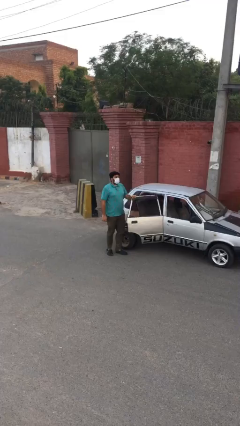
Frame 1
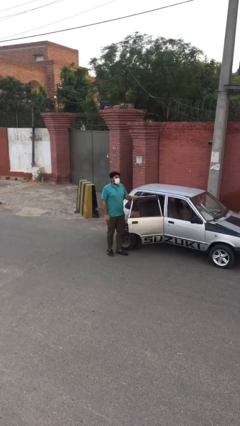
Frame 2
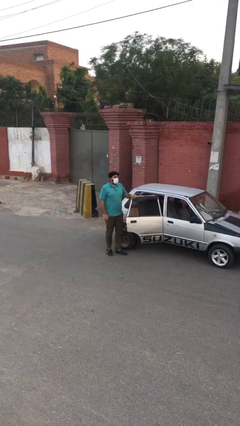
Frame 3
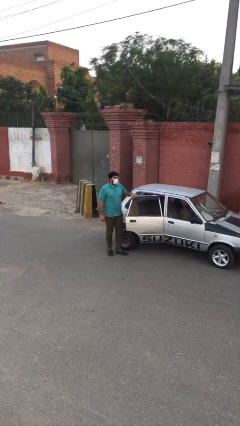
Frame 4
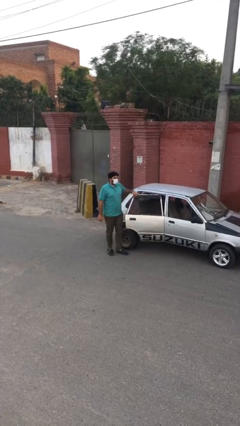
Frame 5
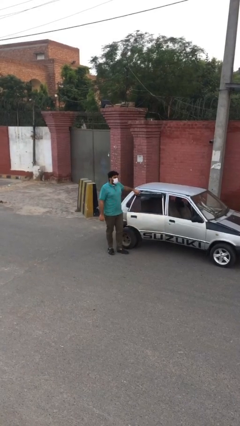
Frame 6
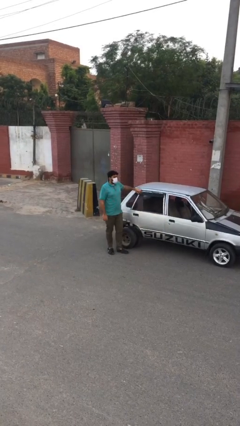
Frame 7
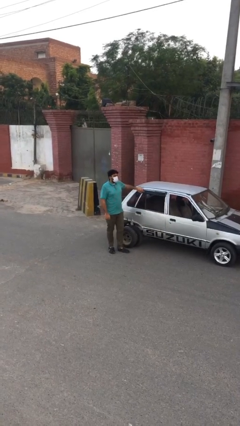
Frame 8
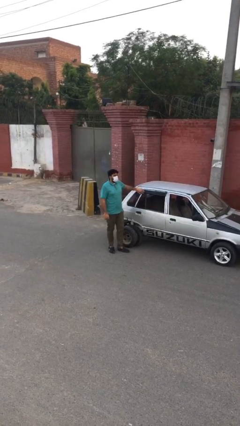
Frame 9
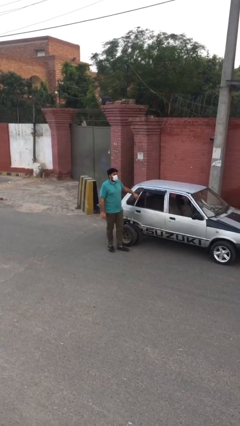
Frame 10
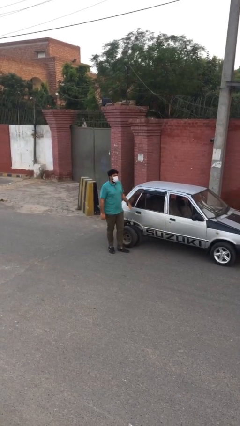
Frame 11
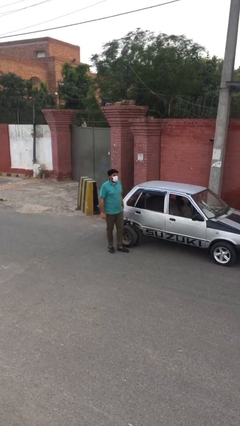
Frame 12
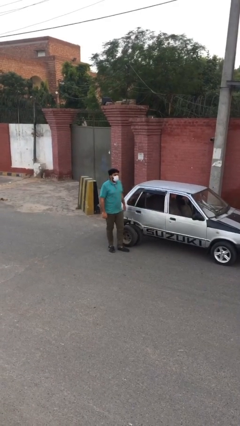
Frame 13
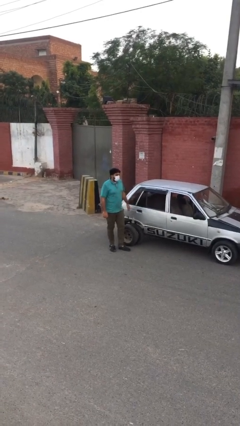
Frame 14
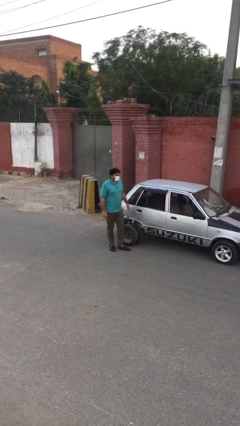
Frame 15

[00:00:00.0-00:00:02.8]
person closes car door

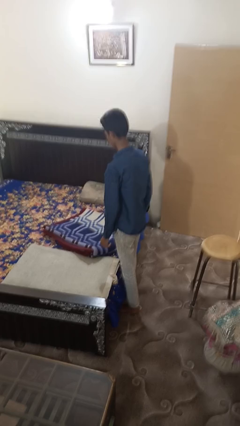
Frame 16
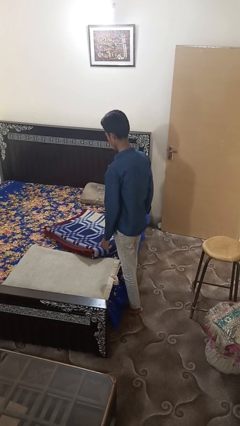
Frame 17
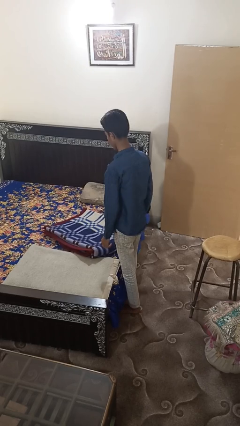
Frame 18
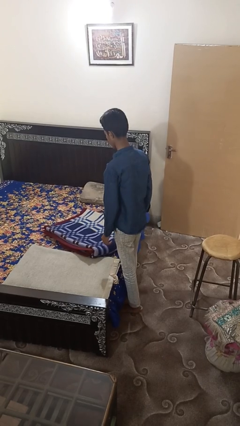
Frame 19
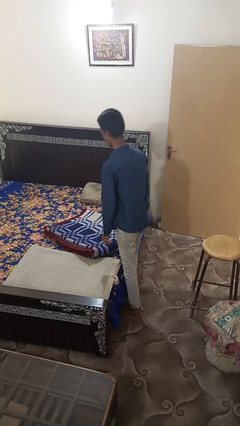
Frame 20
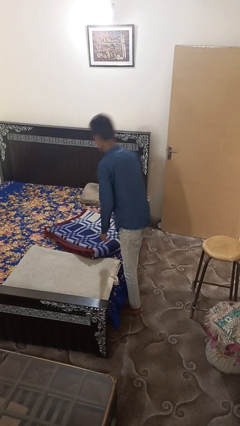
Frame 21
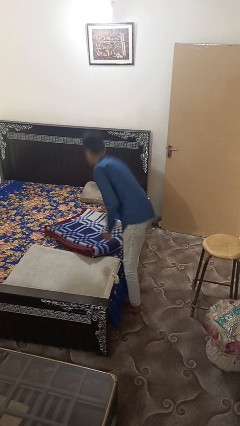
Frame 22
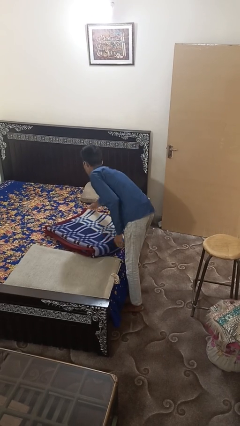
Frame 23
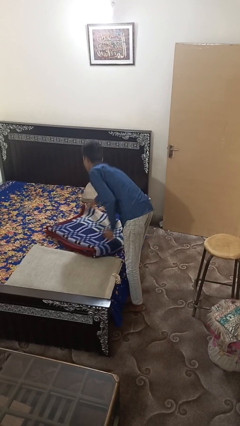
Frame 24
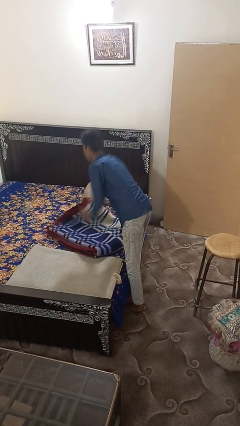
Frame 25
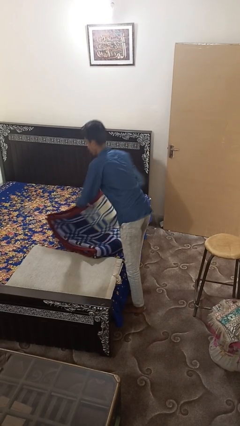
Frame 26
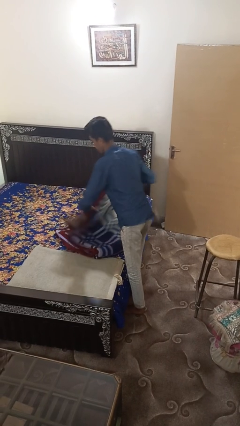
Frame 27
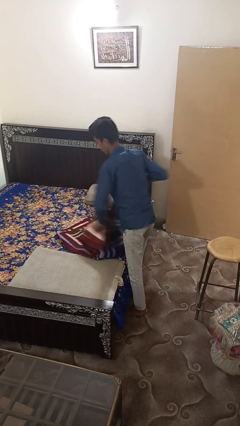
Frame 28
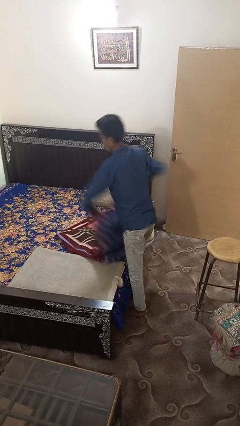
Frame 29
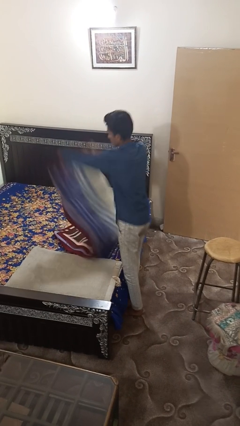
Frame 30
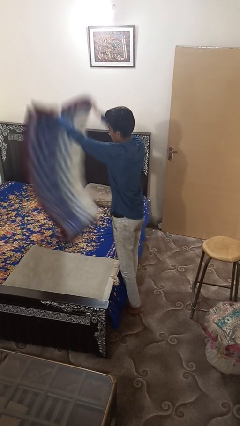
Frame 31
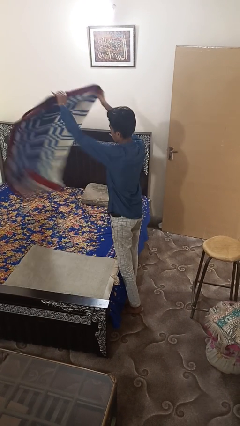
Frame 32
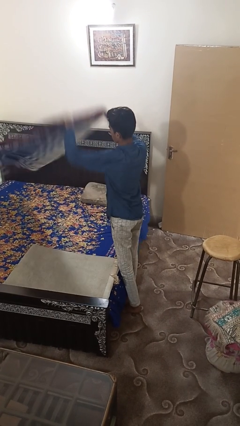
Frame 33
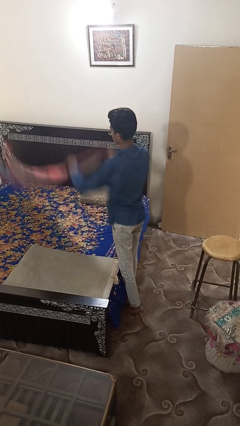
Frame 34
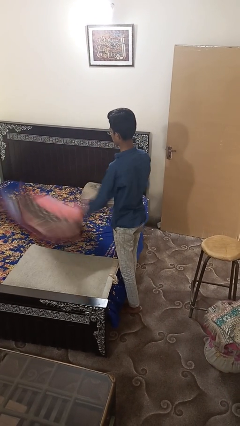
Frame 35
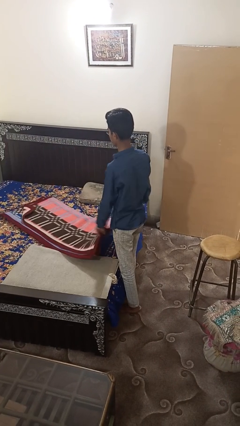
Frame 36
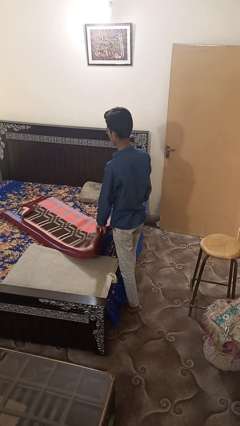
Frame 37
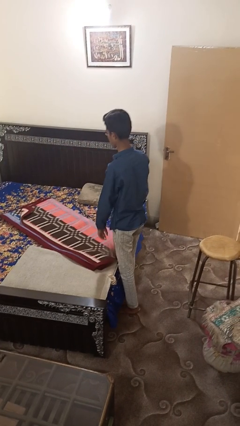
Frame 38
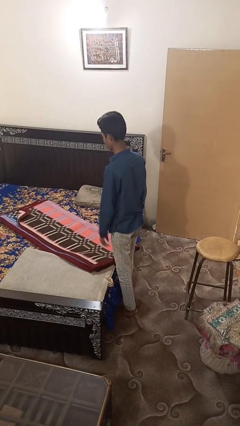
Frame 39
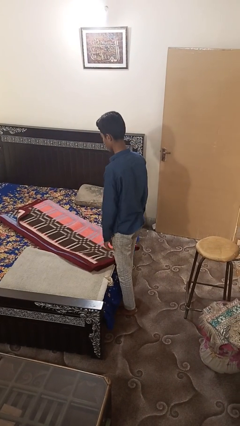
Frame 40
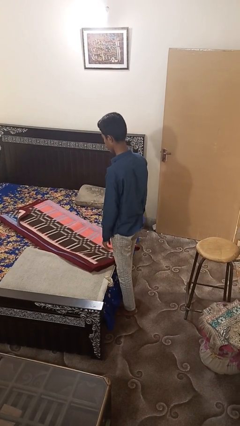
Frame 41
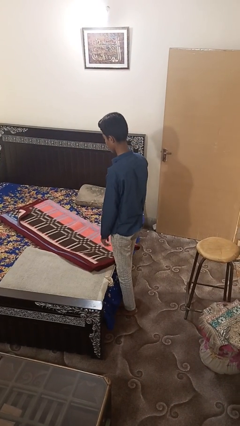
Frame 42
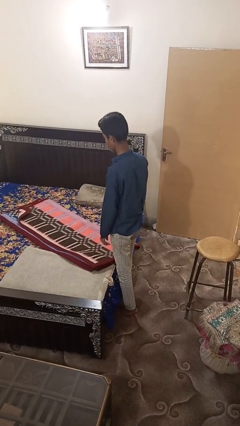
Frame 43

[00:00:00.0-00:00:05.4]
person unfolds blanket

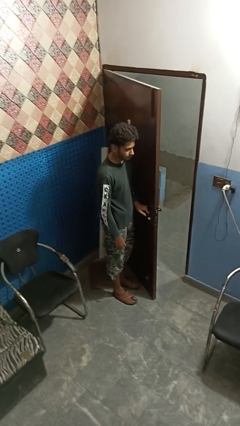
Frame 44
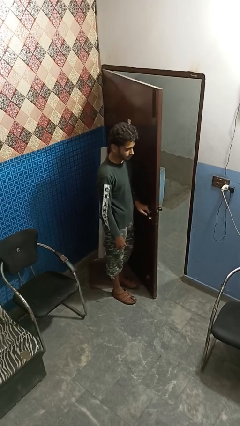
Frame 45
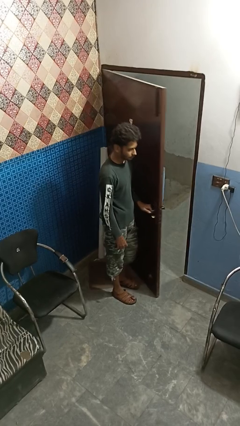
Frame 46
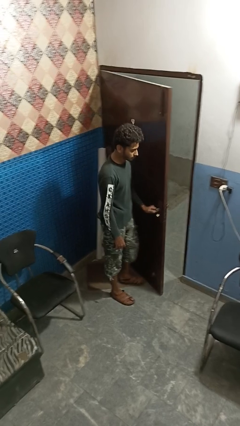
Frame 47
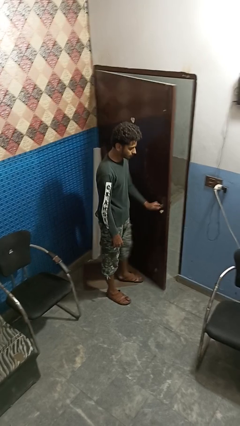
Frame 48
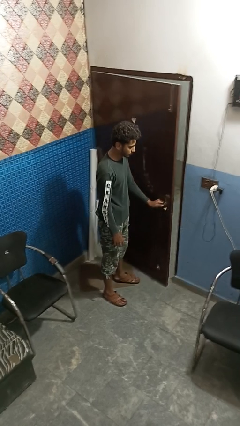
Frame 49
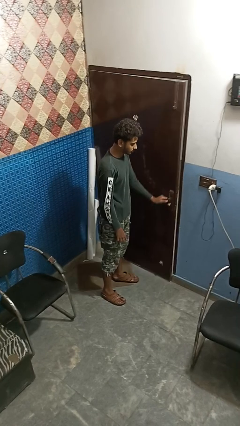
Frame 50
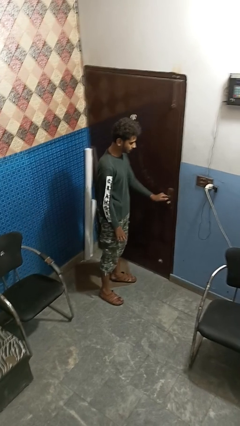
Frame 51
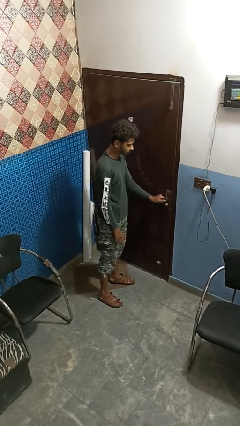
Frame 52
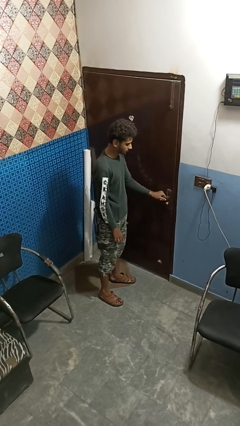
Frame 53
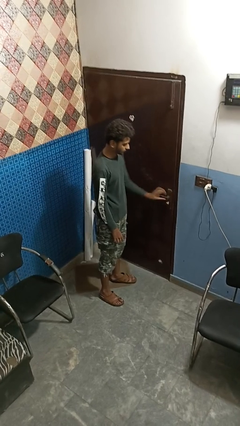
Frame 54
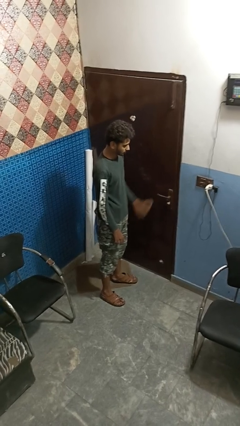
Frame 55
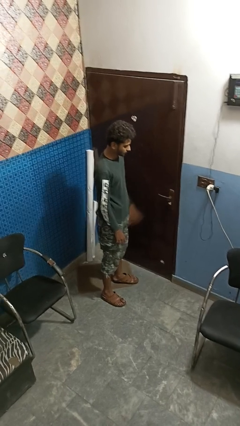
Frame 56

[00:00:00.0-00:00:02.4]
person closes facility door

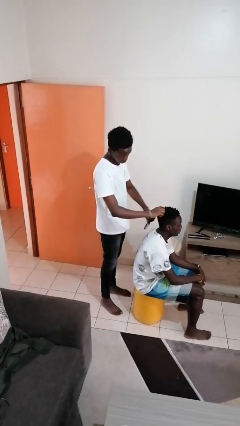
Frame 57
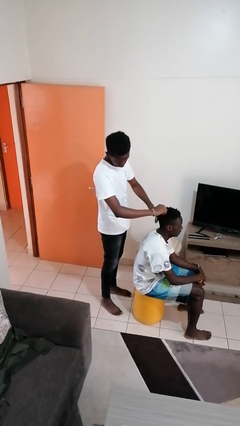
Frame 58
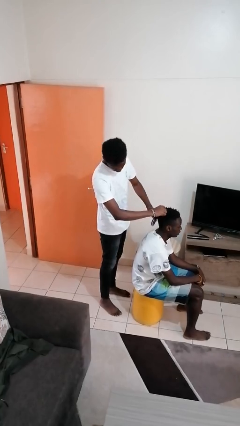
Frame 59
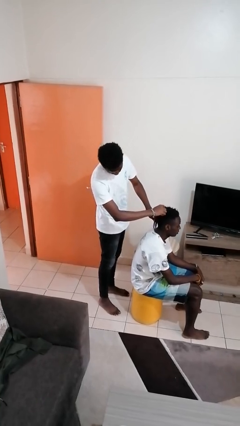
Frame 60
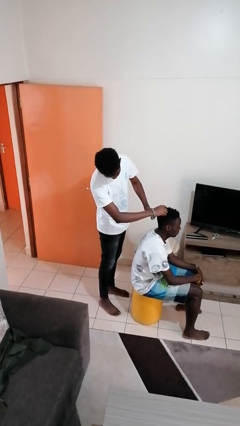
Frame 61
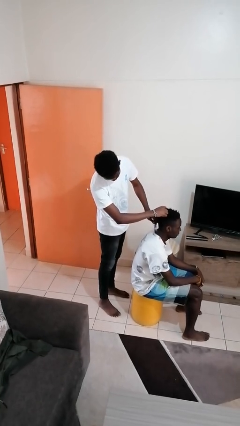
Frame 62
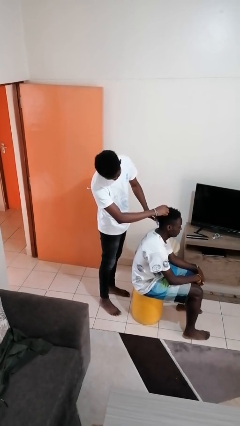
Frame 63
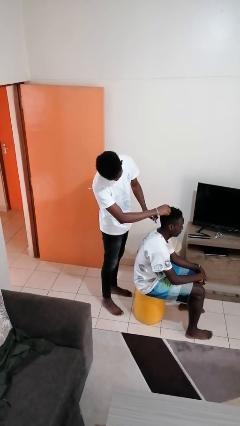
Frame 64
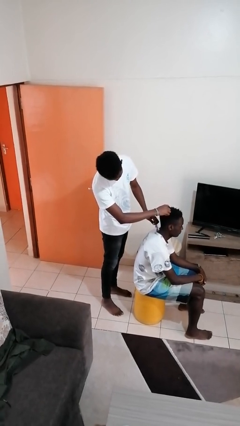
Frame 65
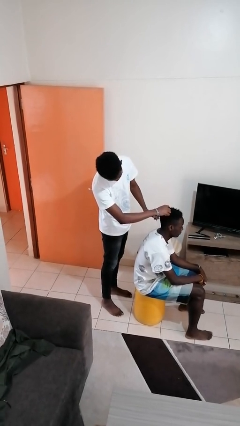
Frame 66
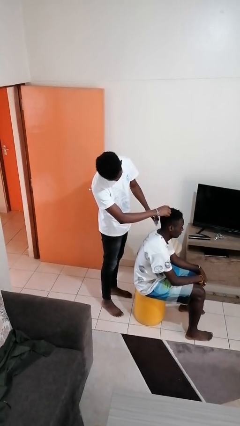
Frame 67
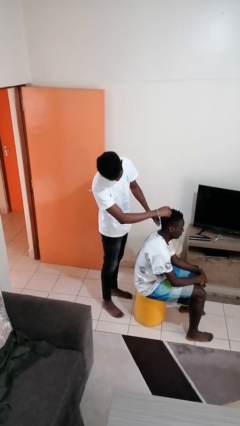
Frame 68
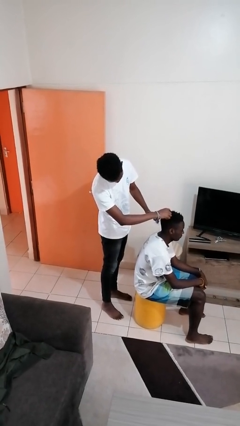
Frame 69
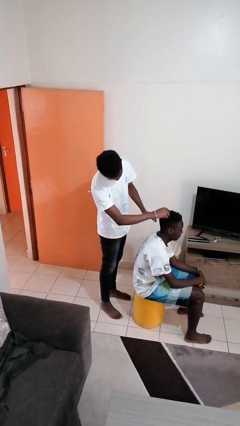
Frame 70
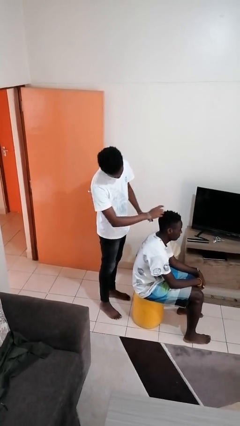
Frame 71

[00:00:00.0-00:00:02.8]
person brushes hair of person

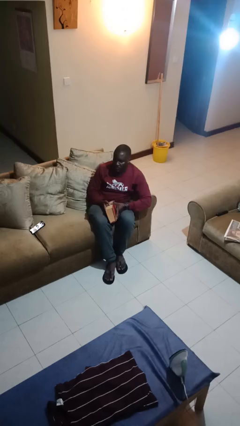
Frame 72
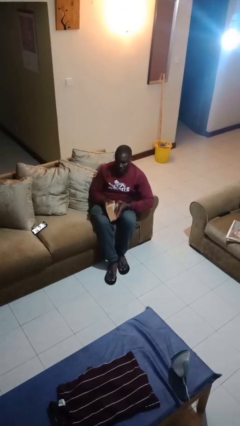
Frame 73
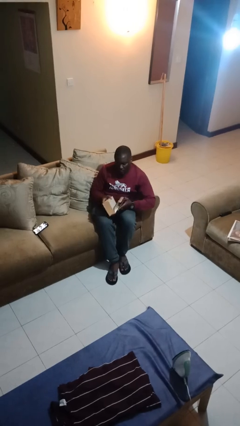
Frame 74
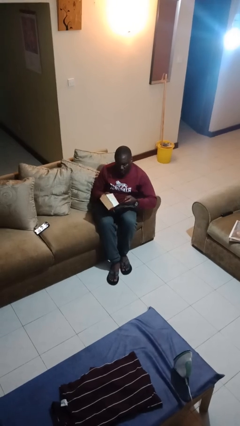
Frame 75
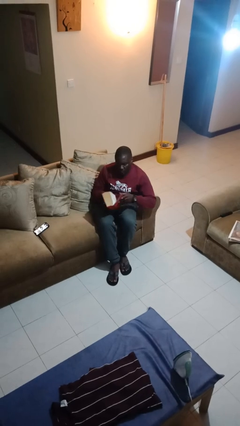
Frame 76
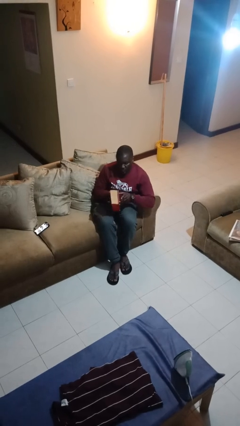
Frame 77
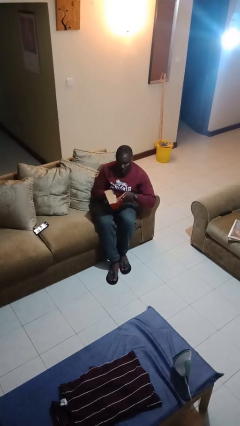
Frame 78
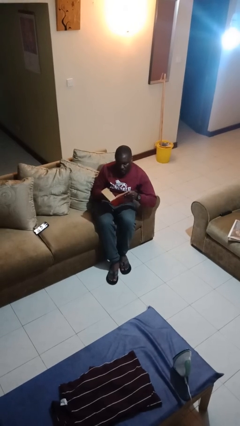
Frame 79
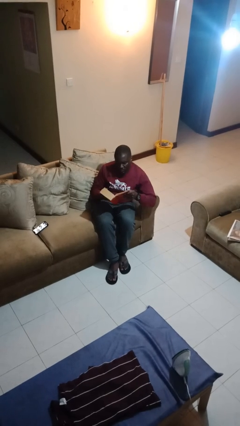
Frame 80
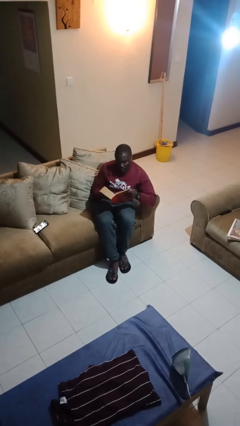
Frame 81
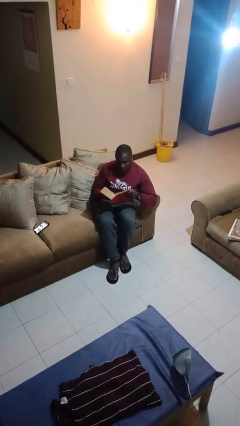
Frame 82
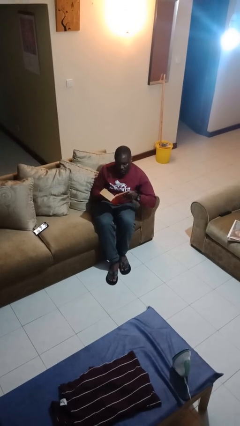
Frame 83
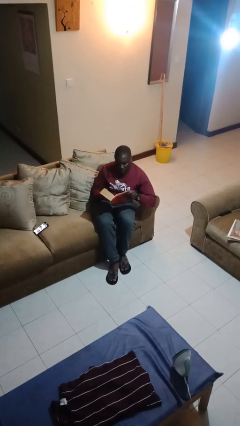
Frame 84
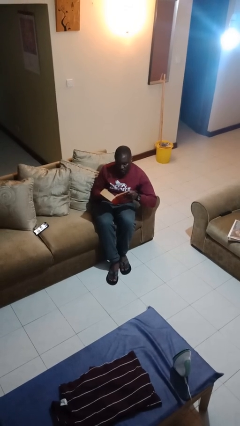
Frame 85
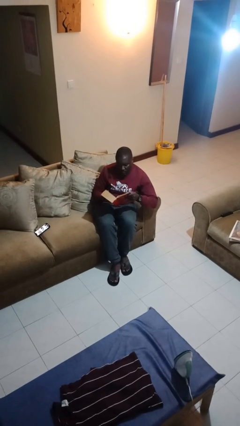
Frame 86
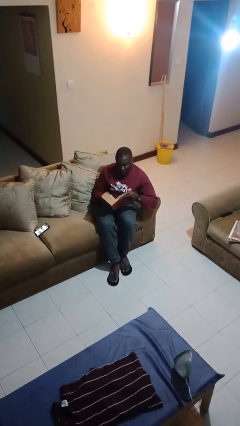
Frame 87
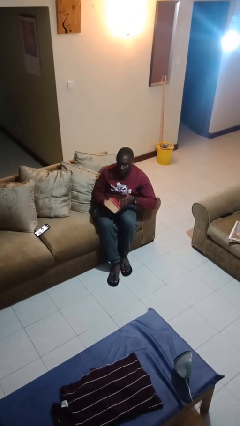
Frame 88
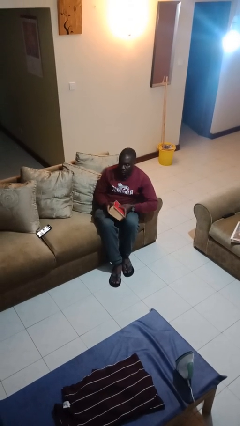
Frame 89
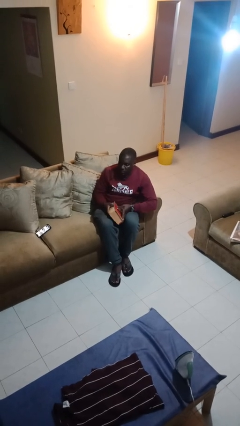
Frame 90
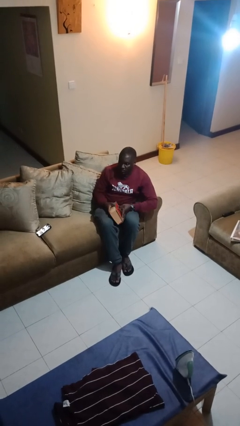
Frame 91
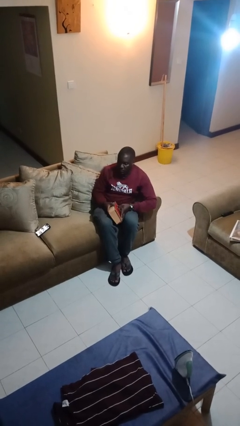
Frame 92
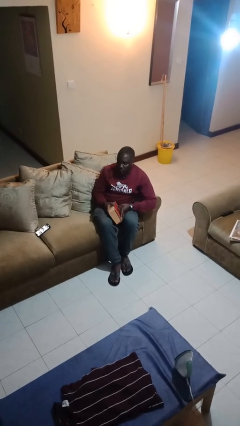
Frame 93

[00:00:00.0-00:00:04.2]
person reads book
